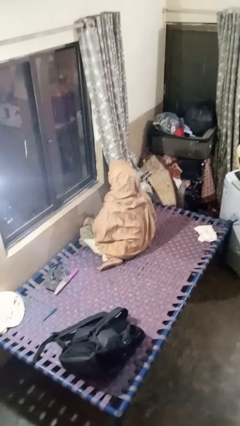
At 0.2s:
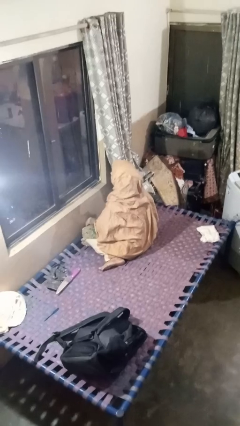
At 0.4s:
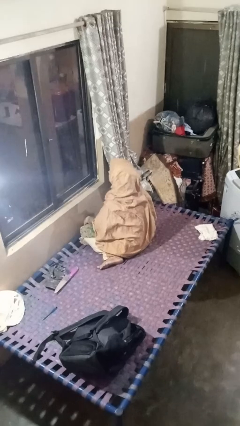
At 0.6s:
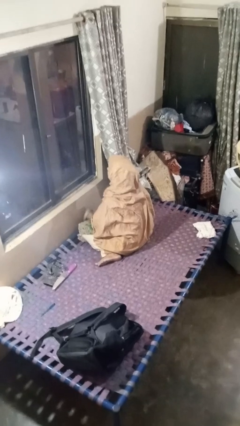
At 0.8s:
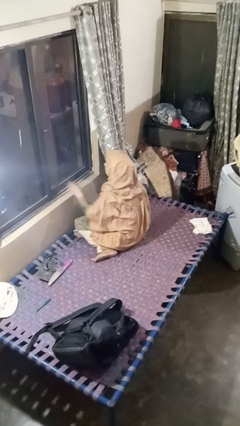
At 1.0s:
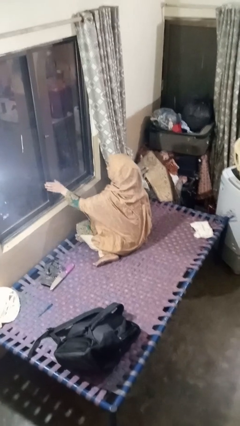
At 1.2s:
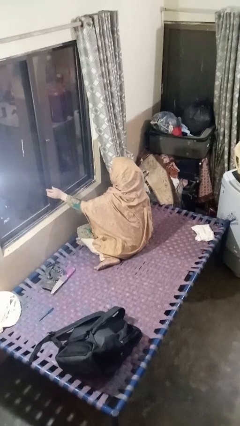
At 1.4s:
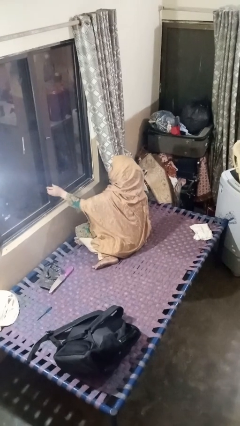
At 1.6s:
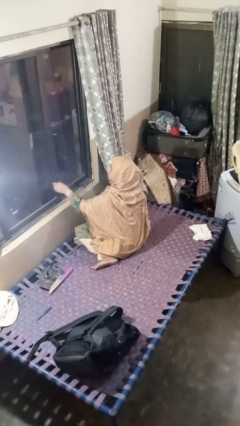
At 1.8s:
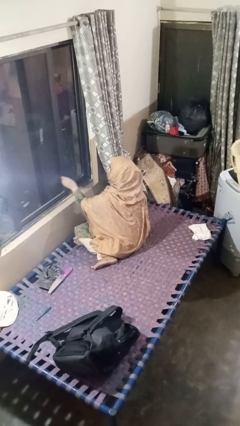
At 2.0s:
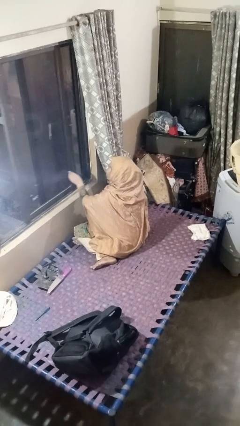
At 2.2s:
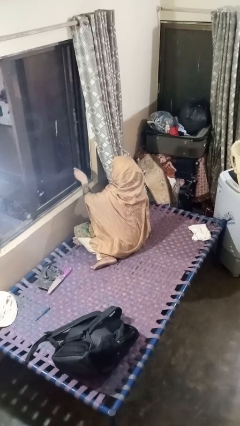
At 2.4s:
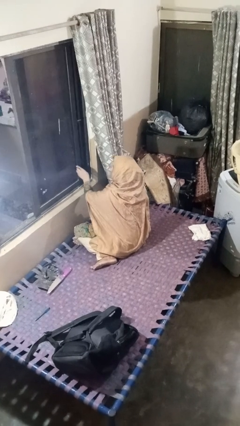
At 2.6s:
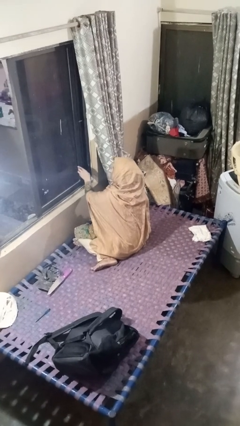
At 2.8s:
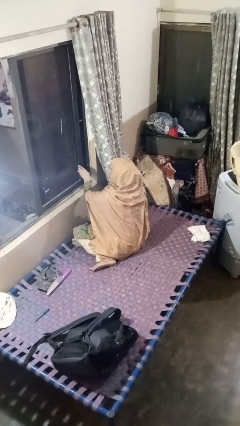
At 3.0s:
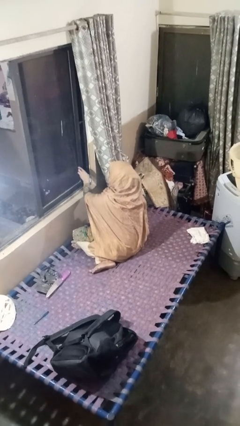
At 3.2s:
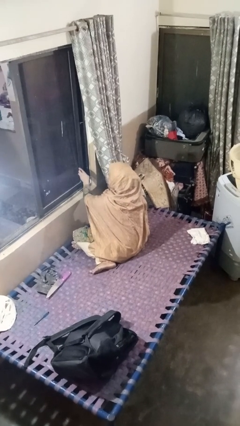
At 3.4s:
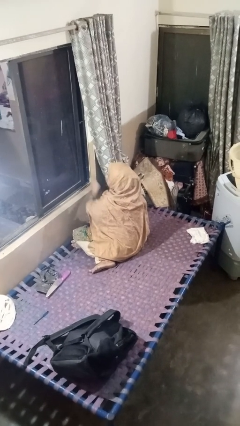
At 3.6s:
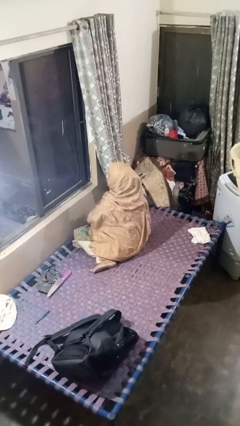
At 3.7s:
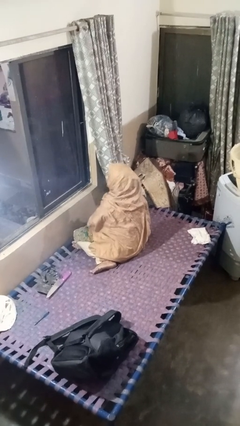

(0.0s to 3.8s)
person opens home window

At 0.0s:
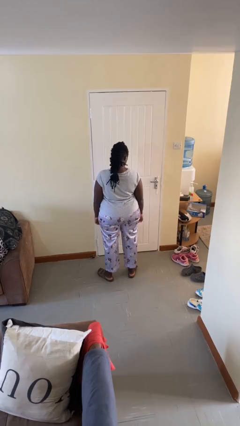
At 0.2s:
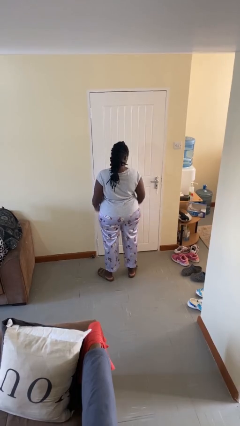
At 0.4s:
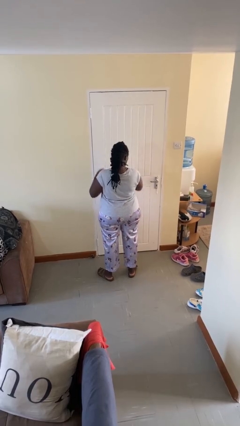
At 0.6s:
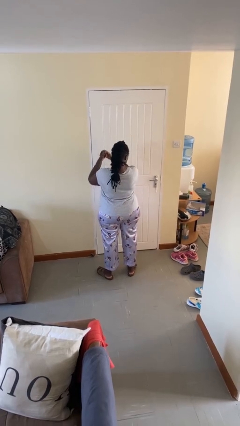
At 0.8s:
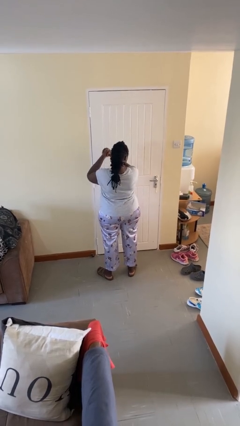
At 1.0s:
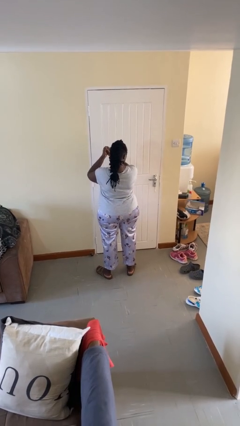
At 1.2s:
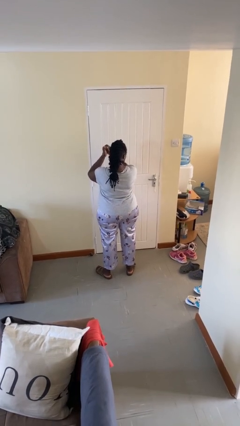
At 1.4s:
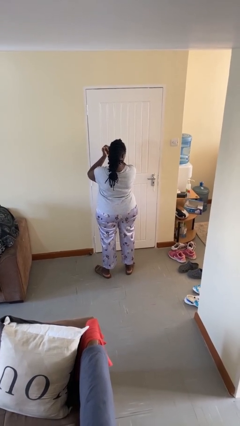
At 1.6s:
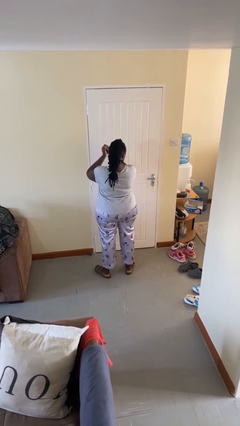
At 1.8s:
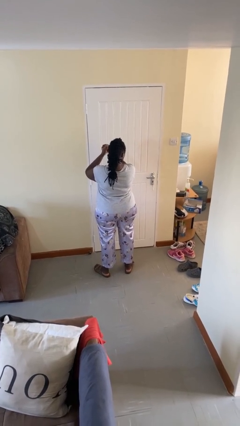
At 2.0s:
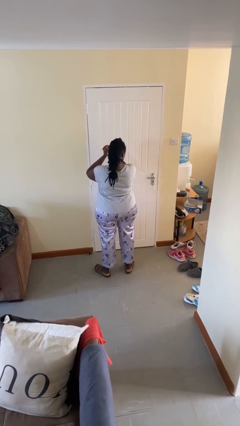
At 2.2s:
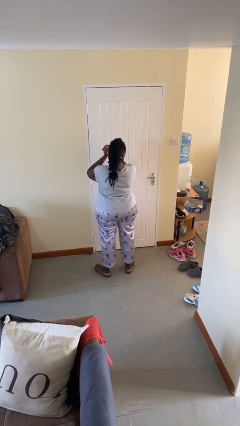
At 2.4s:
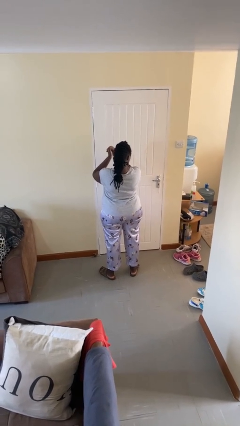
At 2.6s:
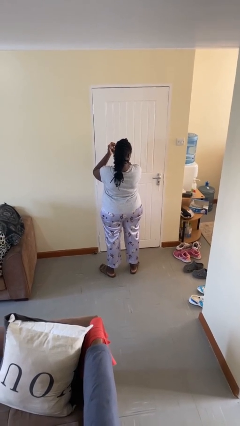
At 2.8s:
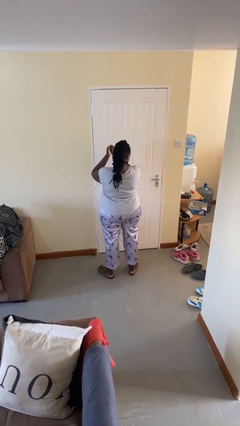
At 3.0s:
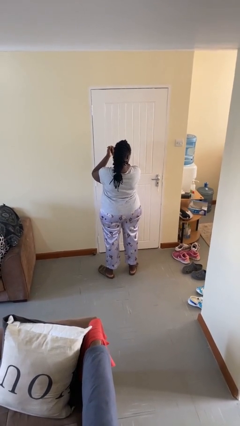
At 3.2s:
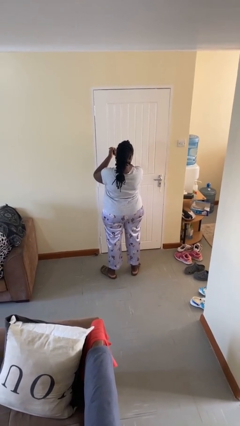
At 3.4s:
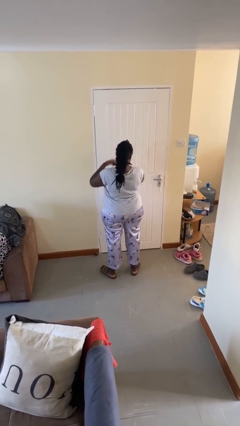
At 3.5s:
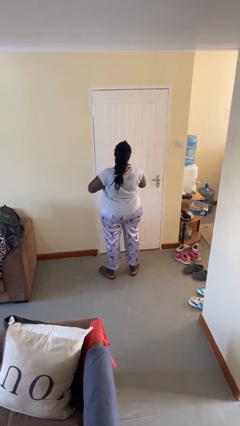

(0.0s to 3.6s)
person cracks knuckles

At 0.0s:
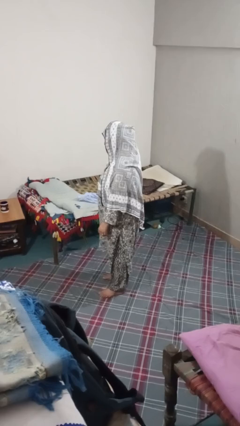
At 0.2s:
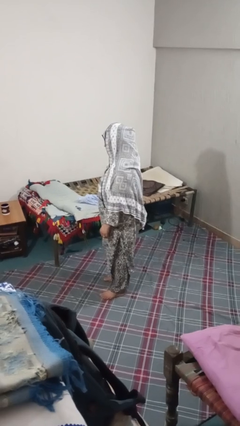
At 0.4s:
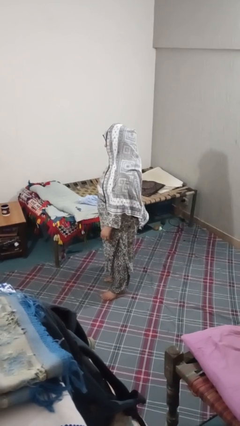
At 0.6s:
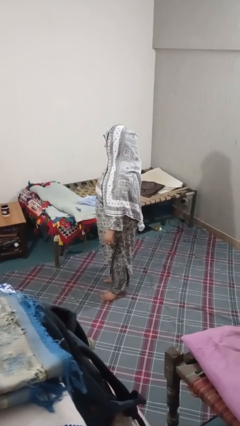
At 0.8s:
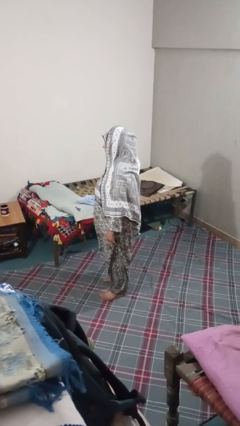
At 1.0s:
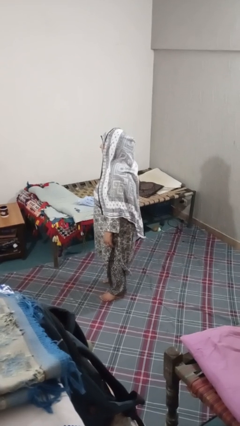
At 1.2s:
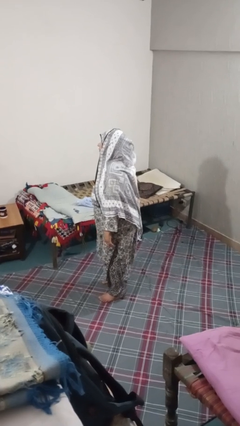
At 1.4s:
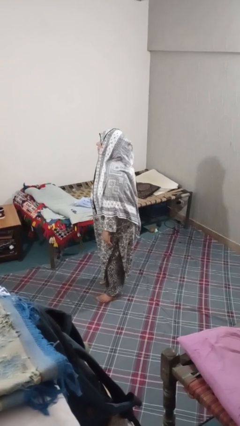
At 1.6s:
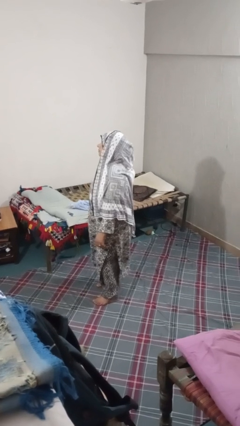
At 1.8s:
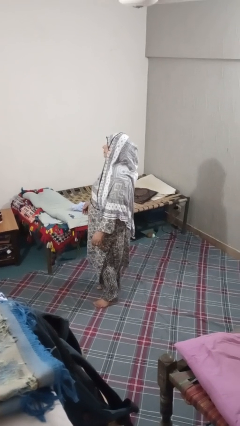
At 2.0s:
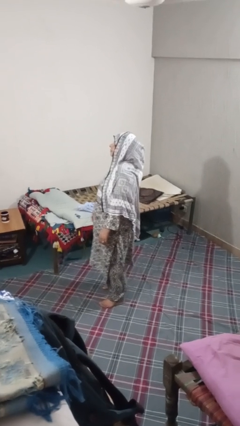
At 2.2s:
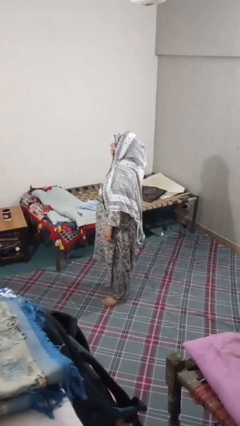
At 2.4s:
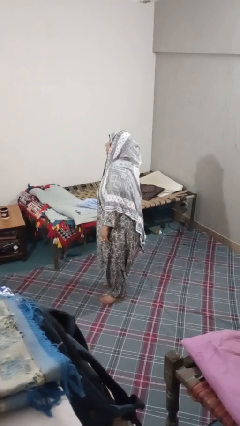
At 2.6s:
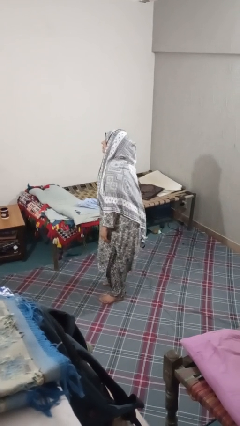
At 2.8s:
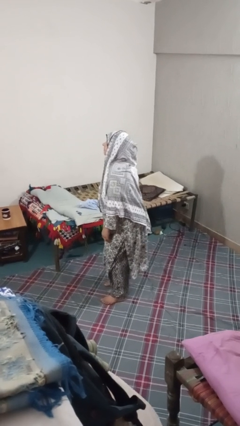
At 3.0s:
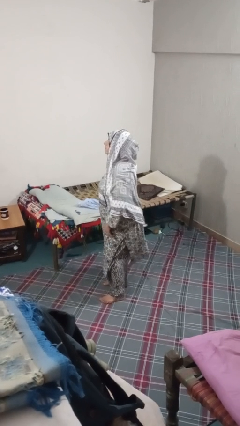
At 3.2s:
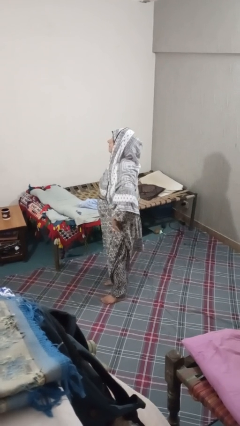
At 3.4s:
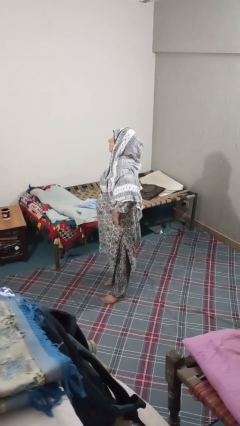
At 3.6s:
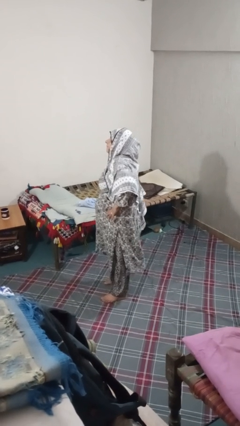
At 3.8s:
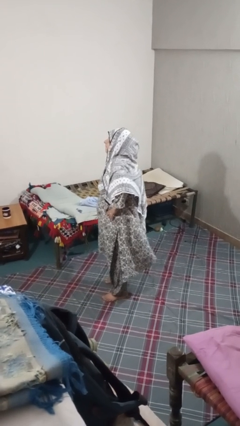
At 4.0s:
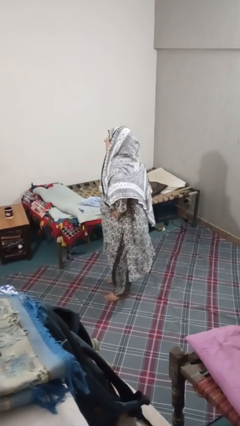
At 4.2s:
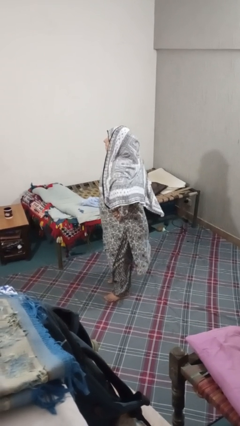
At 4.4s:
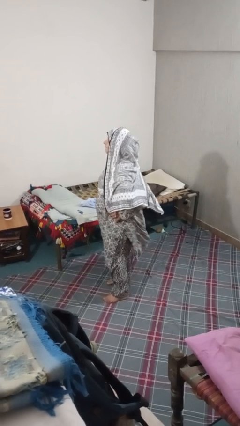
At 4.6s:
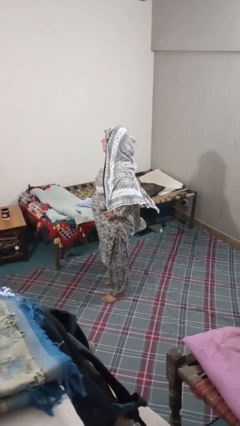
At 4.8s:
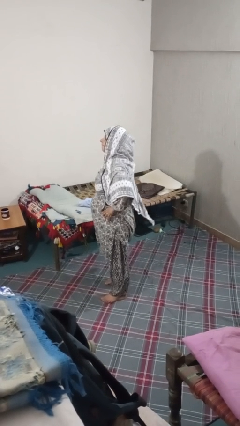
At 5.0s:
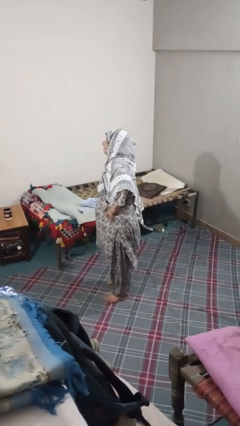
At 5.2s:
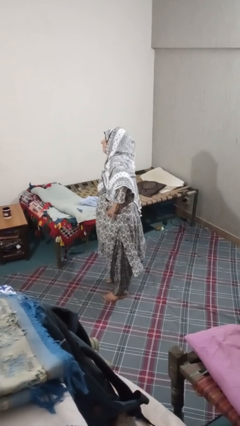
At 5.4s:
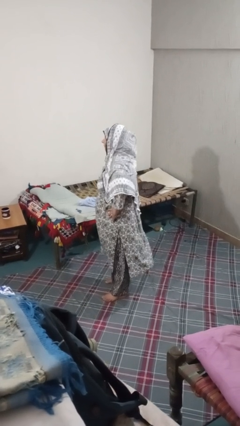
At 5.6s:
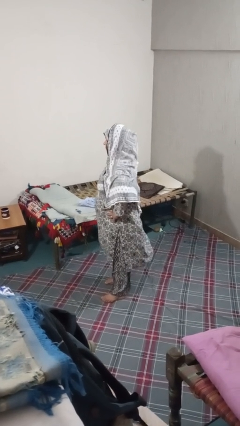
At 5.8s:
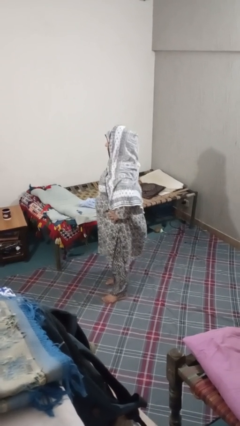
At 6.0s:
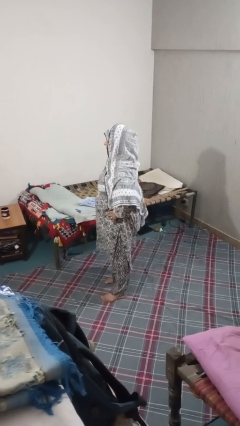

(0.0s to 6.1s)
person wiggles hips

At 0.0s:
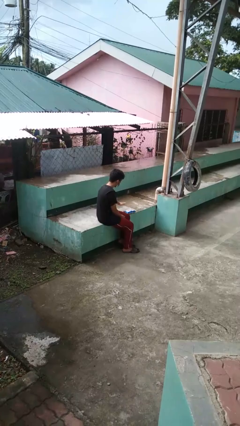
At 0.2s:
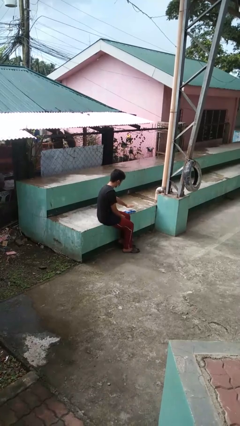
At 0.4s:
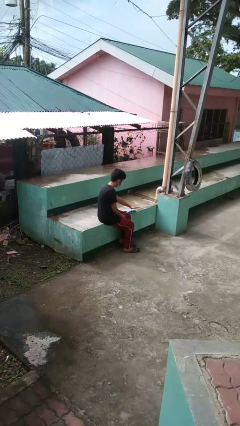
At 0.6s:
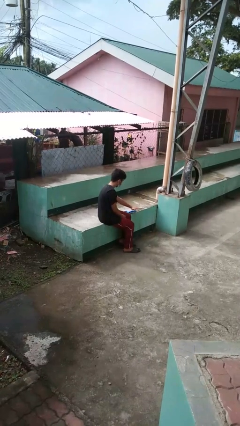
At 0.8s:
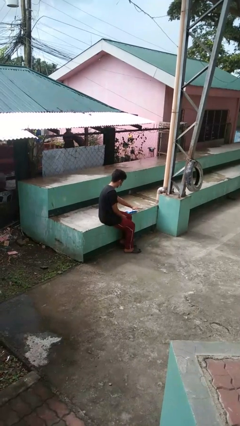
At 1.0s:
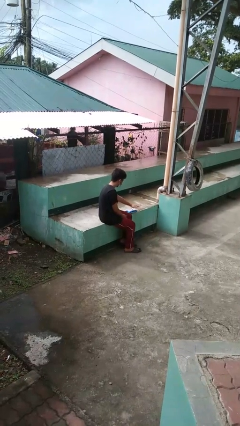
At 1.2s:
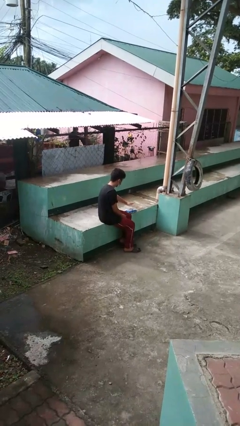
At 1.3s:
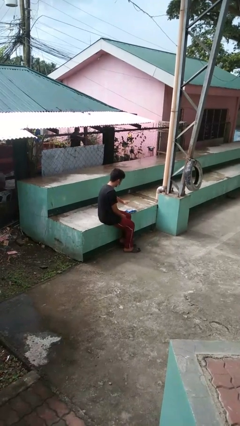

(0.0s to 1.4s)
person waves hand over object

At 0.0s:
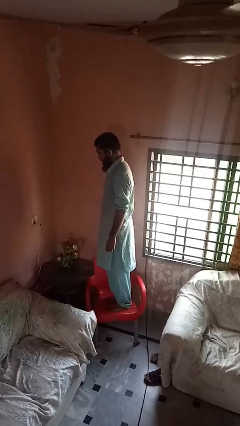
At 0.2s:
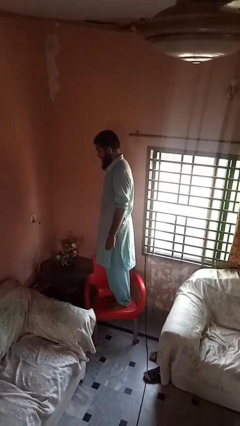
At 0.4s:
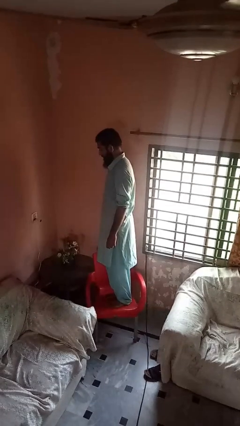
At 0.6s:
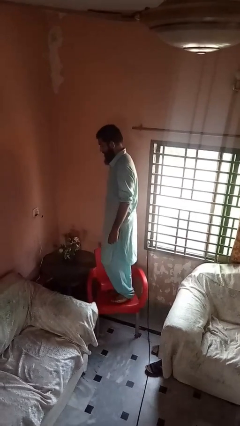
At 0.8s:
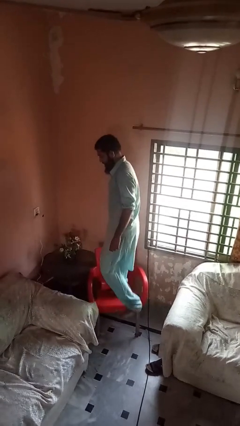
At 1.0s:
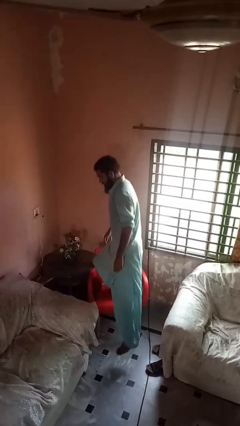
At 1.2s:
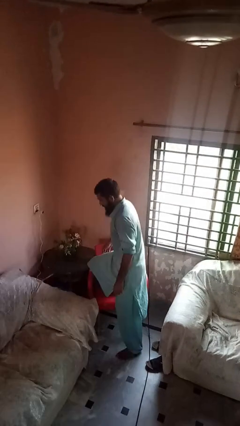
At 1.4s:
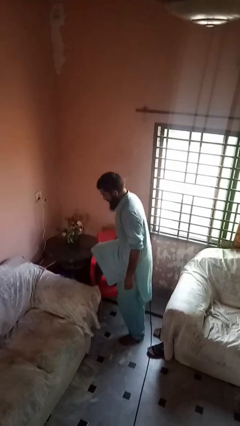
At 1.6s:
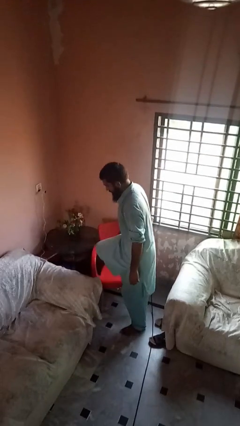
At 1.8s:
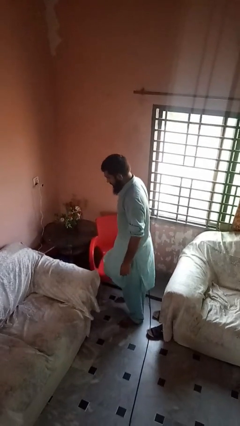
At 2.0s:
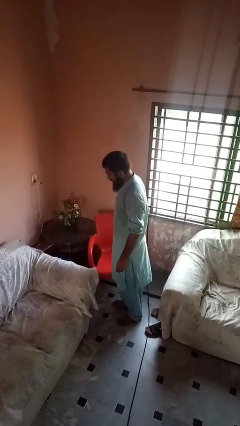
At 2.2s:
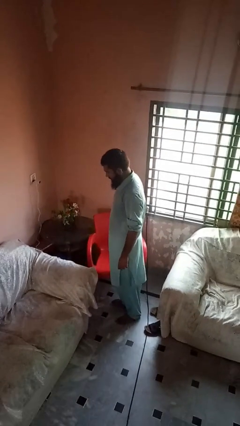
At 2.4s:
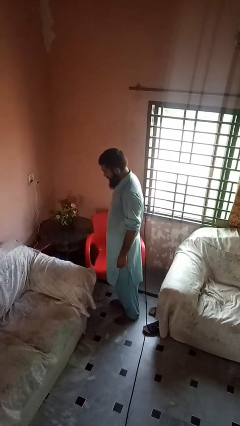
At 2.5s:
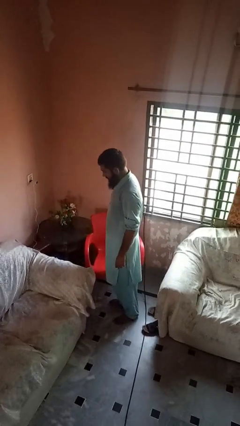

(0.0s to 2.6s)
person climbs off chair

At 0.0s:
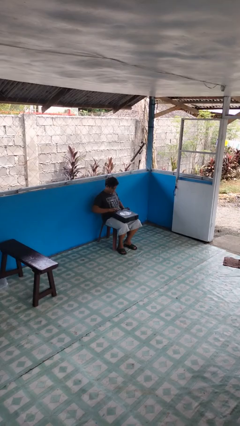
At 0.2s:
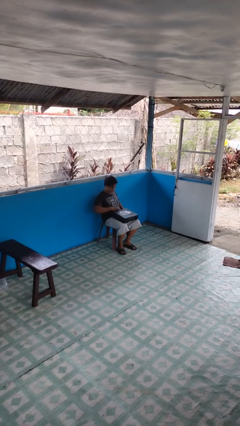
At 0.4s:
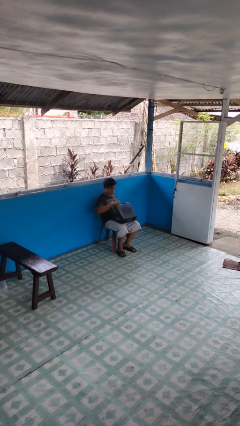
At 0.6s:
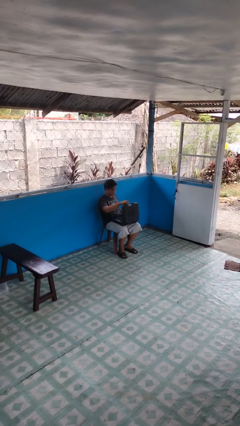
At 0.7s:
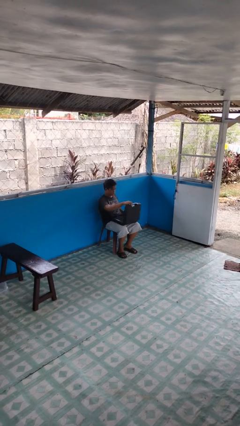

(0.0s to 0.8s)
person opens suitcase
